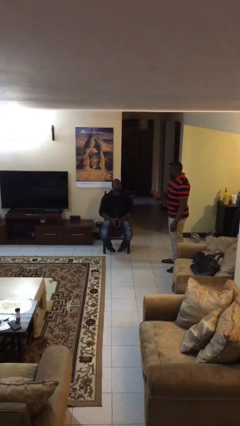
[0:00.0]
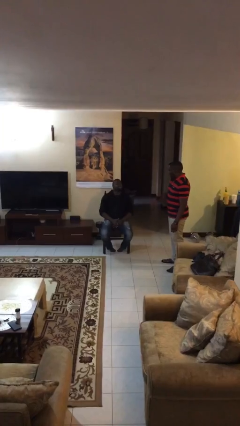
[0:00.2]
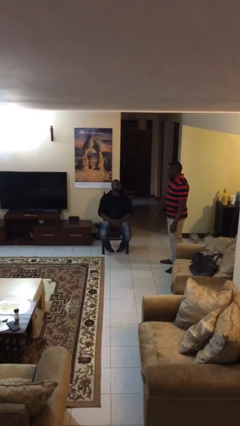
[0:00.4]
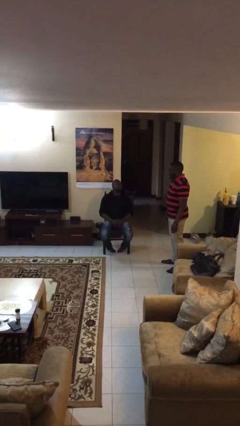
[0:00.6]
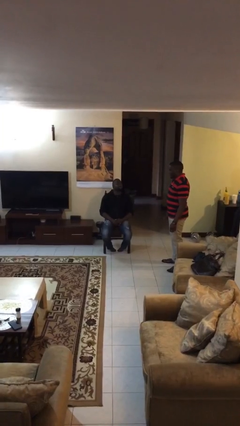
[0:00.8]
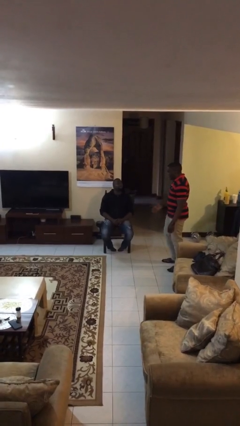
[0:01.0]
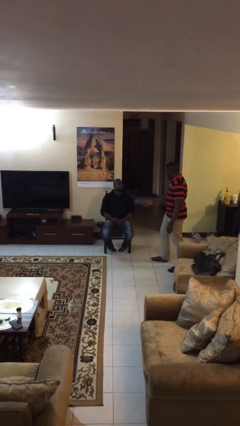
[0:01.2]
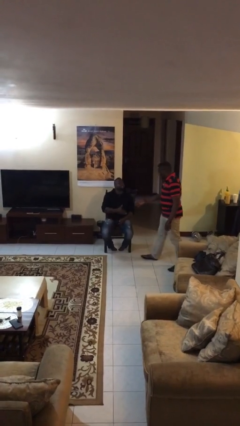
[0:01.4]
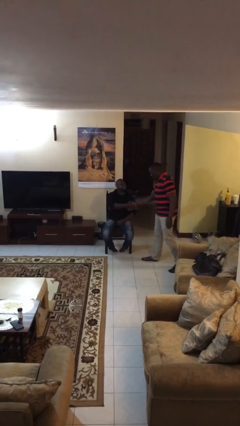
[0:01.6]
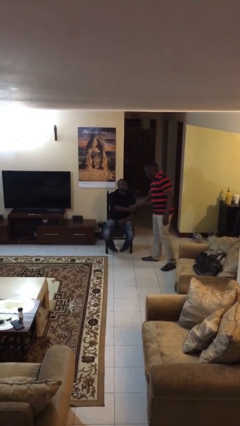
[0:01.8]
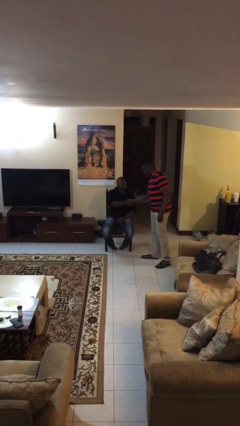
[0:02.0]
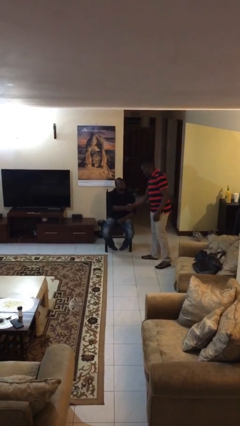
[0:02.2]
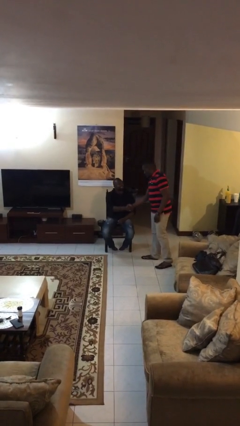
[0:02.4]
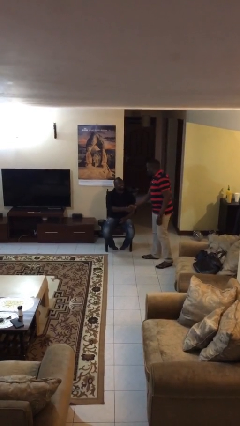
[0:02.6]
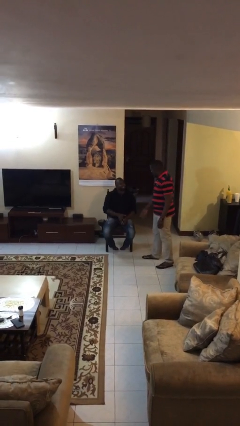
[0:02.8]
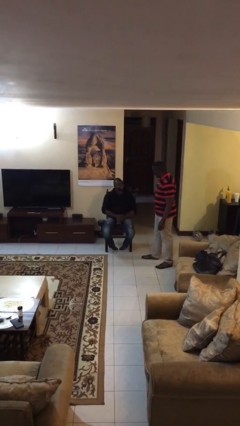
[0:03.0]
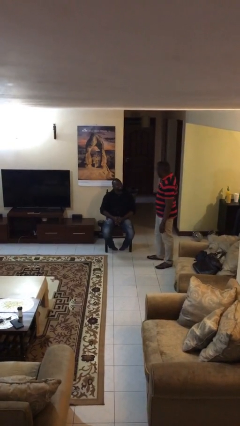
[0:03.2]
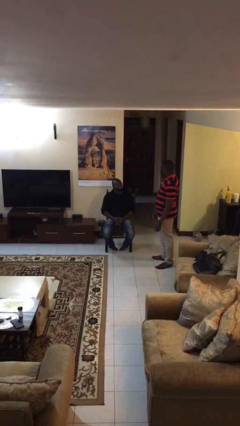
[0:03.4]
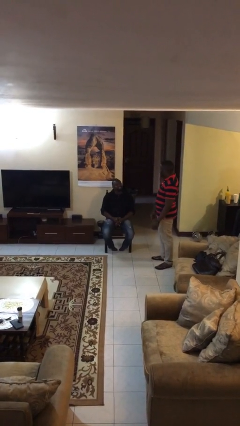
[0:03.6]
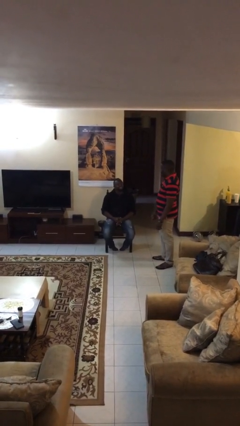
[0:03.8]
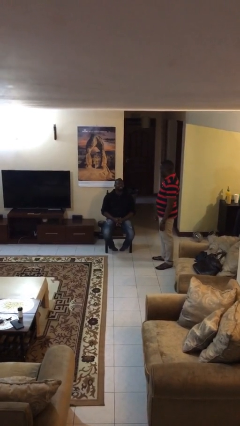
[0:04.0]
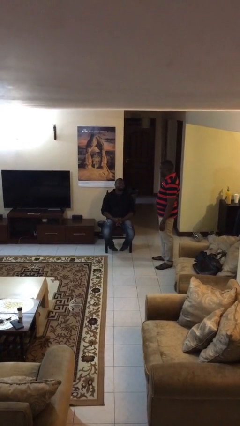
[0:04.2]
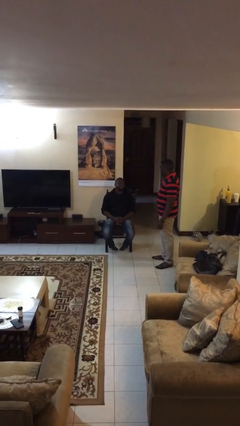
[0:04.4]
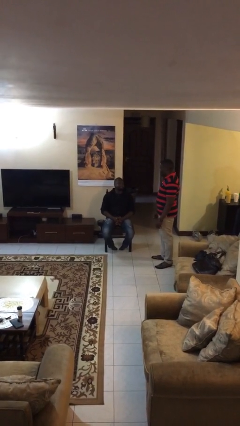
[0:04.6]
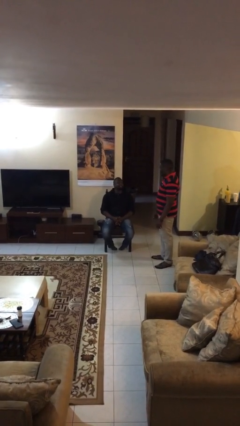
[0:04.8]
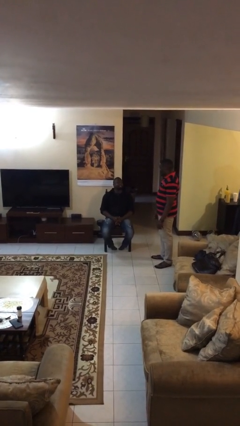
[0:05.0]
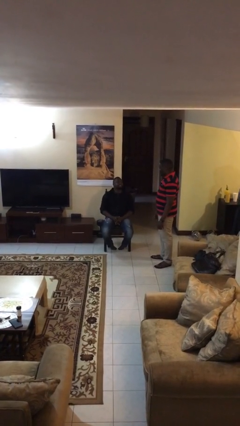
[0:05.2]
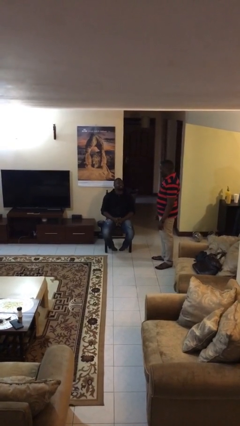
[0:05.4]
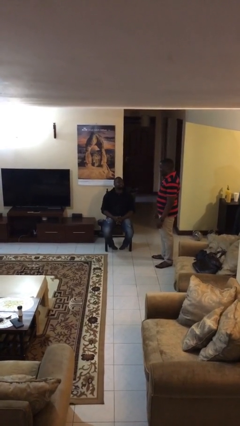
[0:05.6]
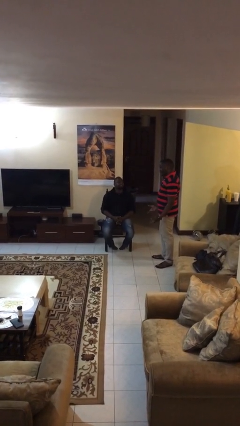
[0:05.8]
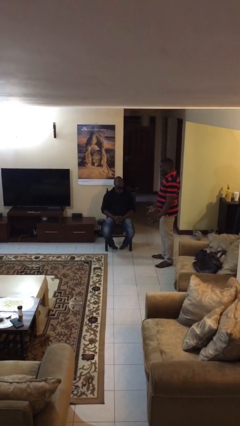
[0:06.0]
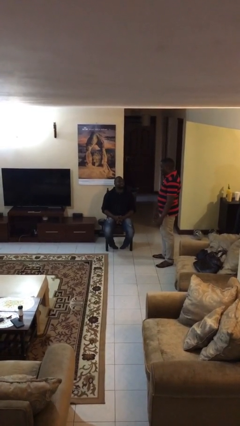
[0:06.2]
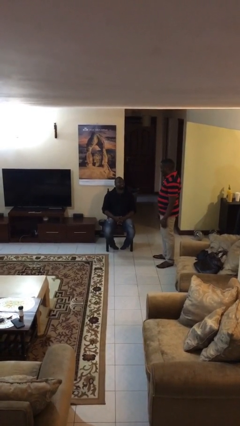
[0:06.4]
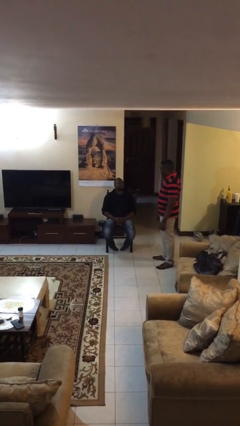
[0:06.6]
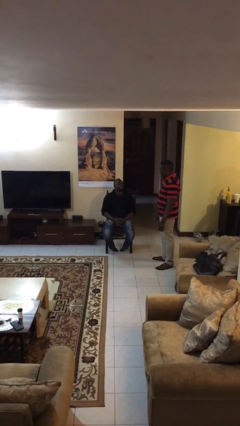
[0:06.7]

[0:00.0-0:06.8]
person shakes hand

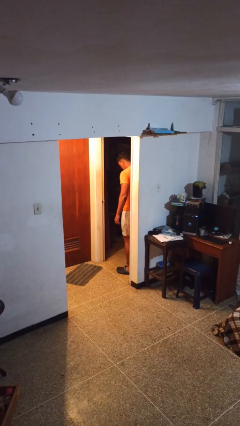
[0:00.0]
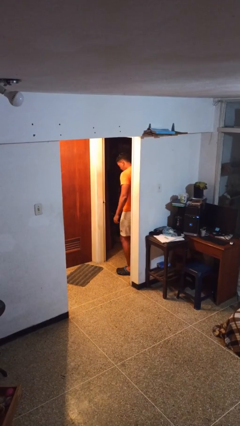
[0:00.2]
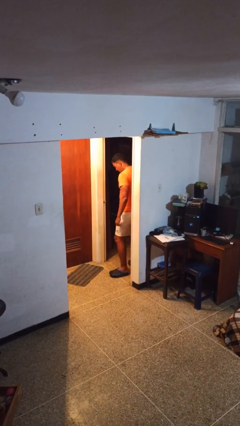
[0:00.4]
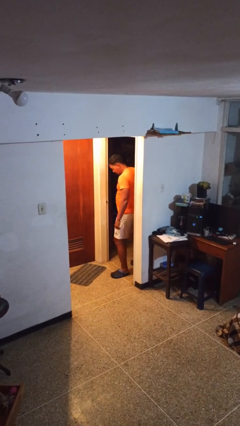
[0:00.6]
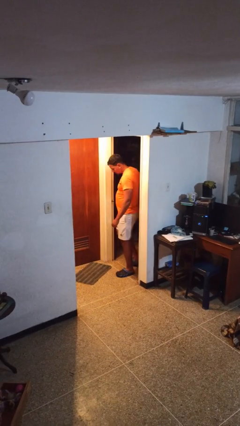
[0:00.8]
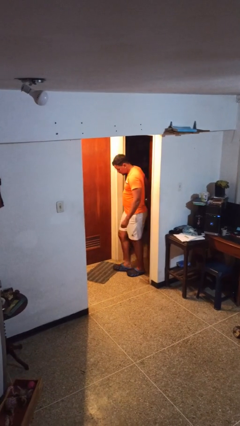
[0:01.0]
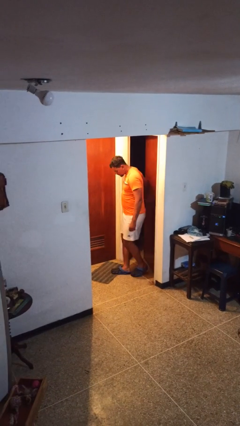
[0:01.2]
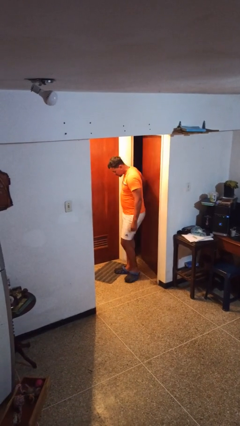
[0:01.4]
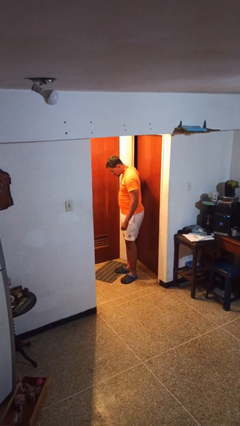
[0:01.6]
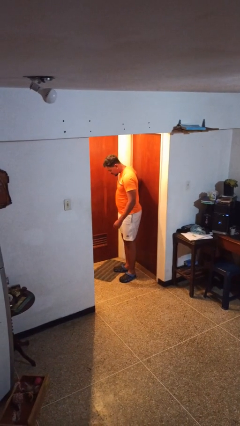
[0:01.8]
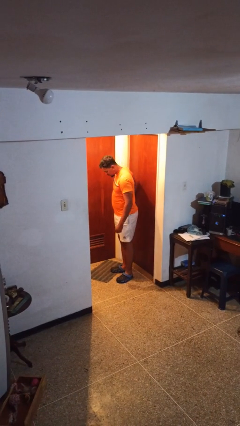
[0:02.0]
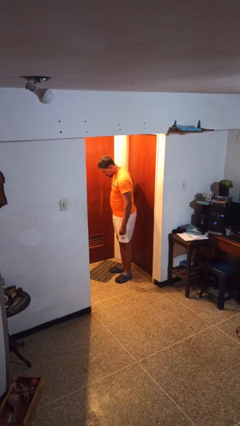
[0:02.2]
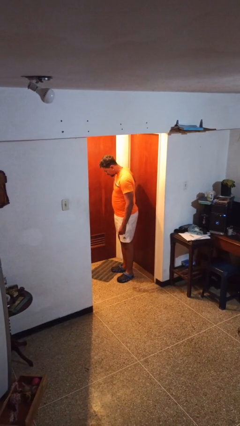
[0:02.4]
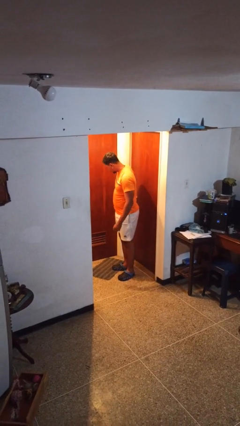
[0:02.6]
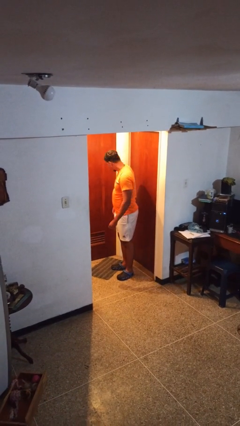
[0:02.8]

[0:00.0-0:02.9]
person closes facility door

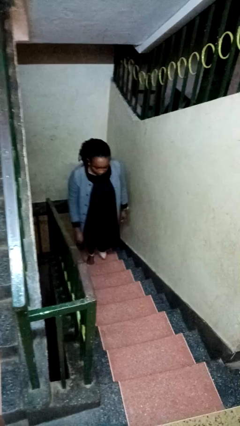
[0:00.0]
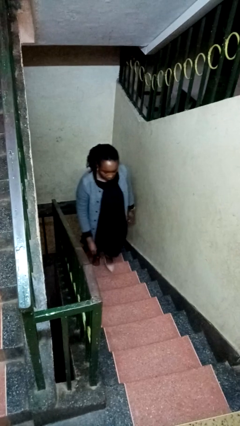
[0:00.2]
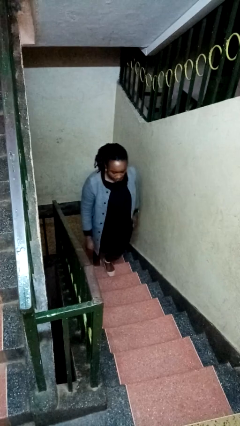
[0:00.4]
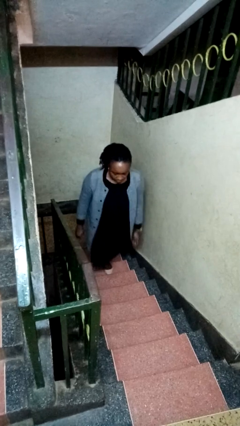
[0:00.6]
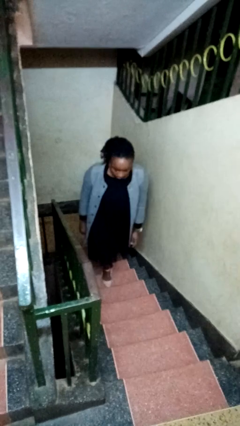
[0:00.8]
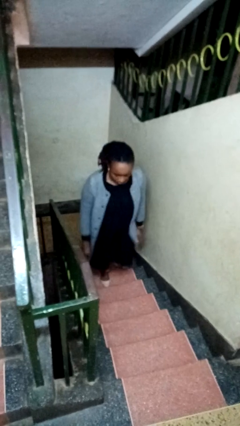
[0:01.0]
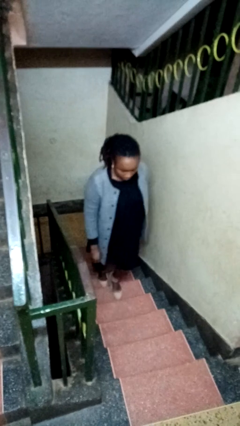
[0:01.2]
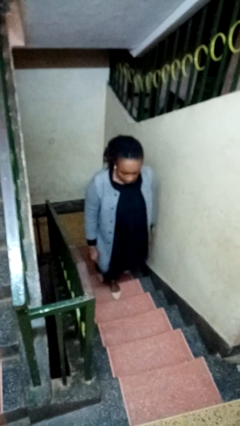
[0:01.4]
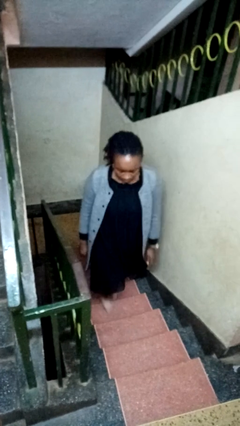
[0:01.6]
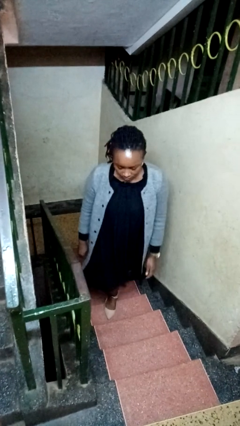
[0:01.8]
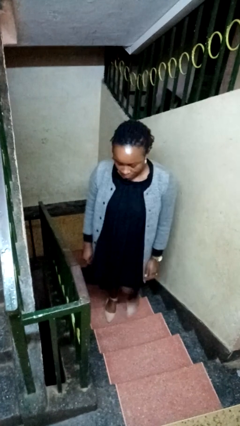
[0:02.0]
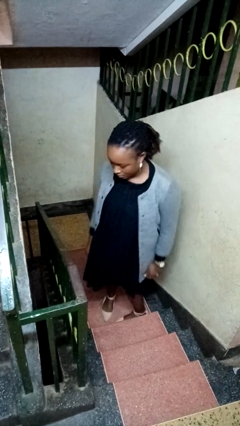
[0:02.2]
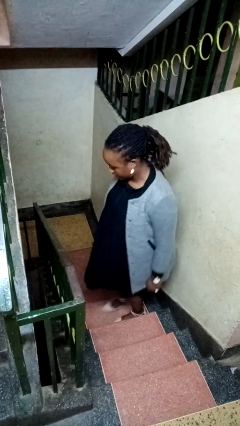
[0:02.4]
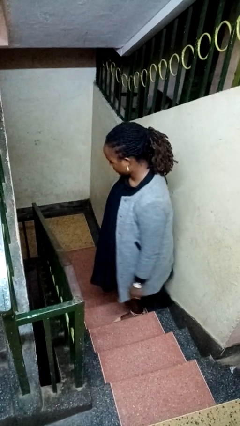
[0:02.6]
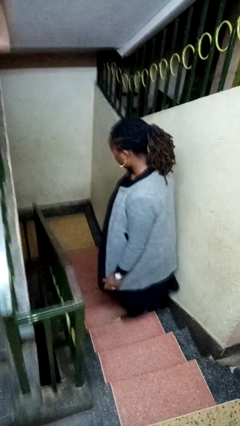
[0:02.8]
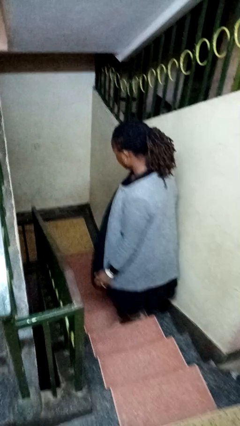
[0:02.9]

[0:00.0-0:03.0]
person climbs up stairs

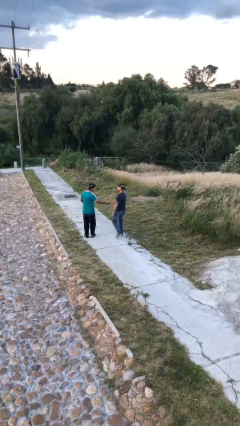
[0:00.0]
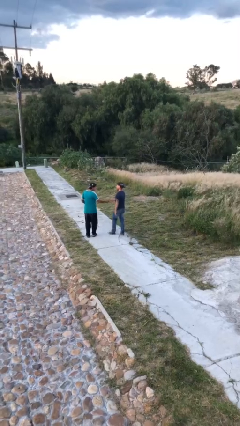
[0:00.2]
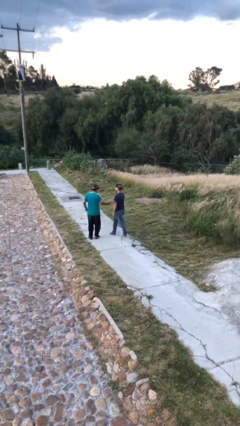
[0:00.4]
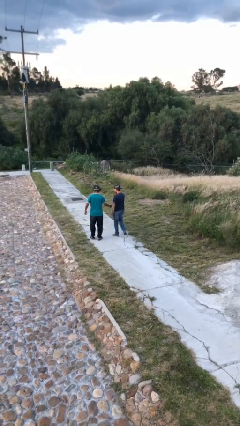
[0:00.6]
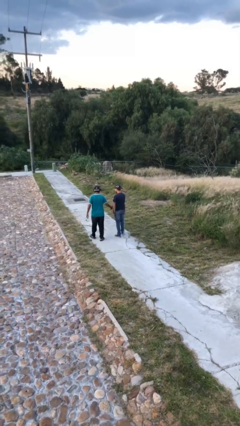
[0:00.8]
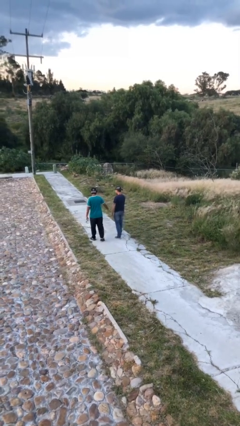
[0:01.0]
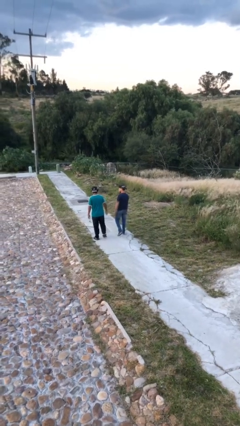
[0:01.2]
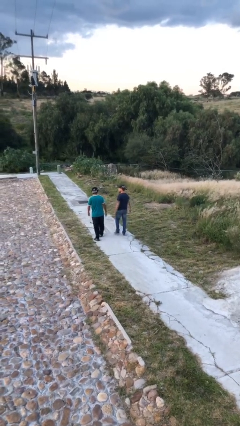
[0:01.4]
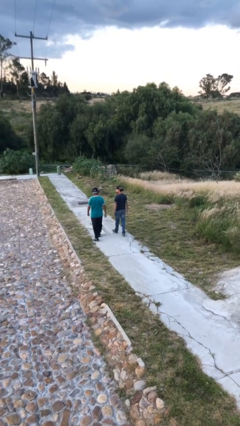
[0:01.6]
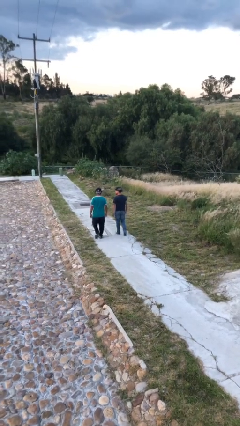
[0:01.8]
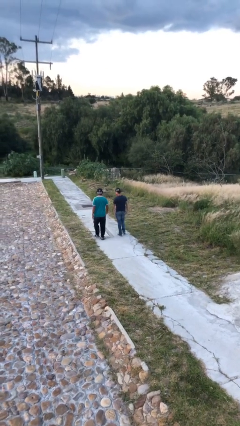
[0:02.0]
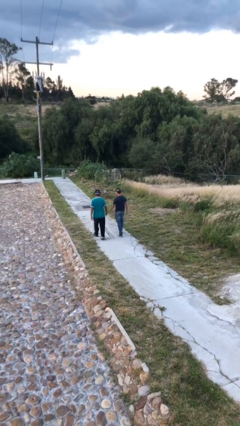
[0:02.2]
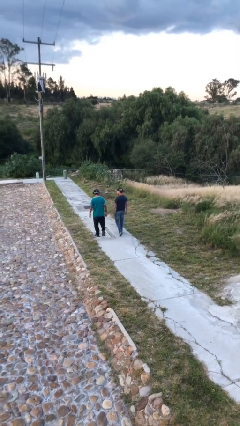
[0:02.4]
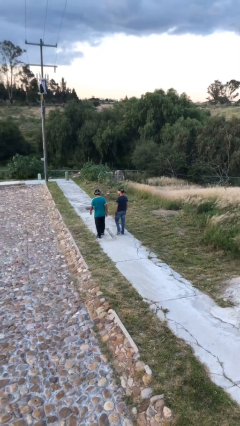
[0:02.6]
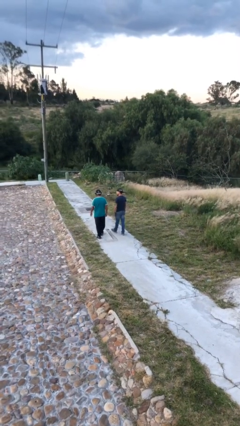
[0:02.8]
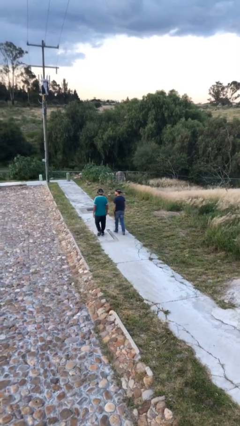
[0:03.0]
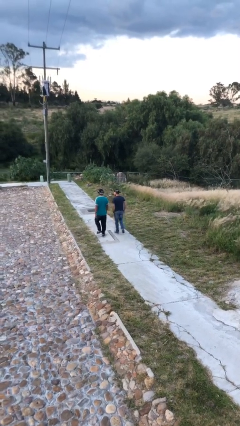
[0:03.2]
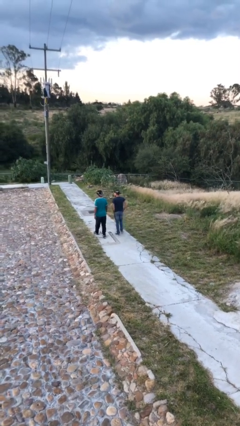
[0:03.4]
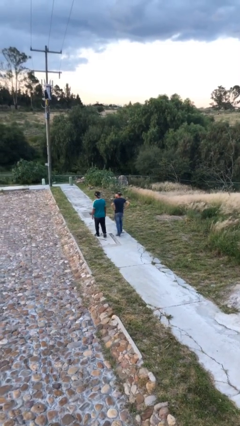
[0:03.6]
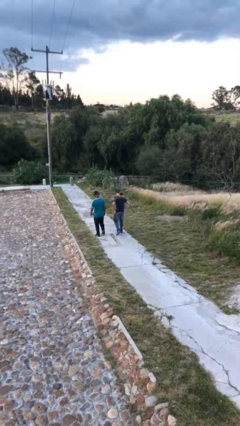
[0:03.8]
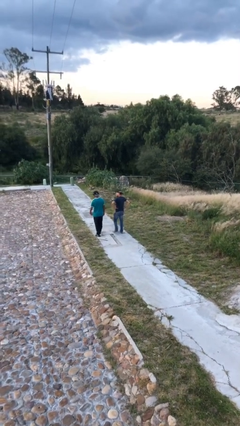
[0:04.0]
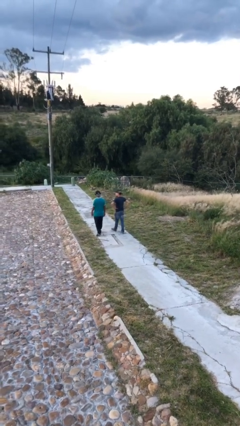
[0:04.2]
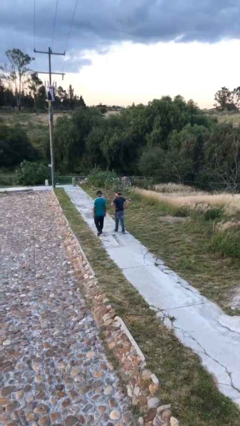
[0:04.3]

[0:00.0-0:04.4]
person talks to person

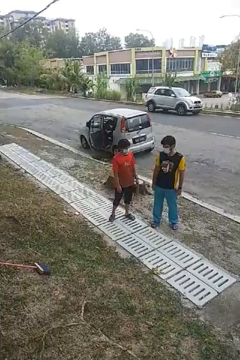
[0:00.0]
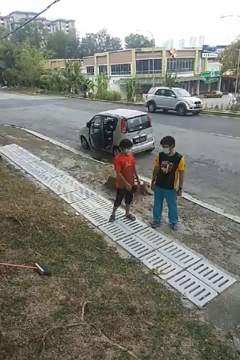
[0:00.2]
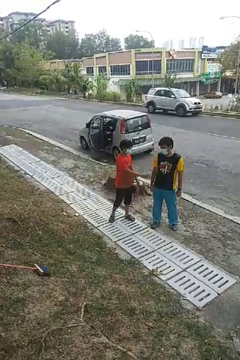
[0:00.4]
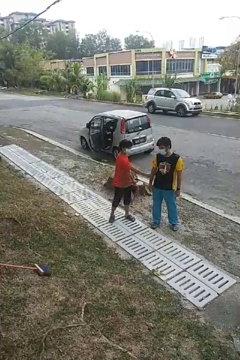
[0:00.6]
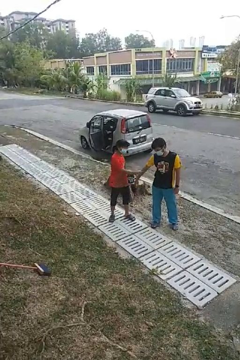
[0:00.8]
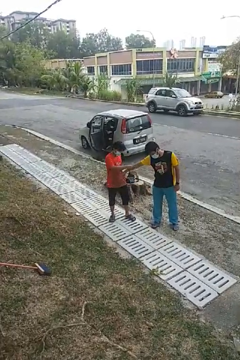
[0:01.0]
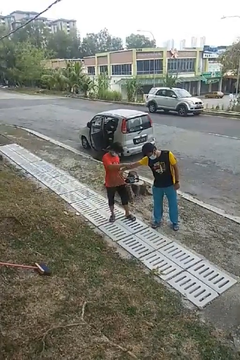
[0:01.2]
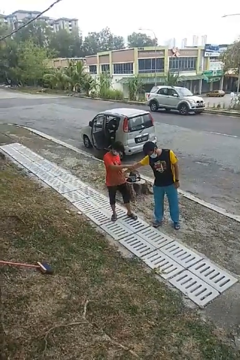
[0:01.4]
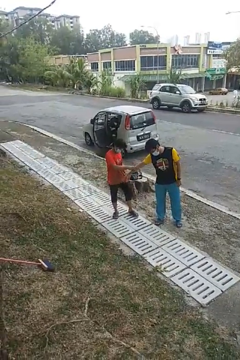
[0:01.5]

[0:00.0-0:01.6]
person grabs person by forearm
